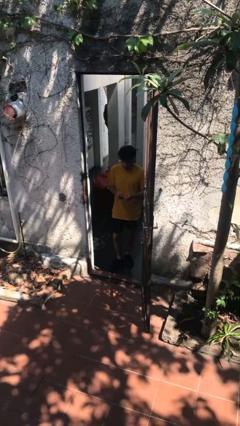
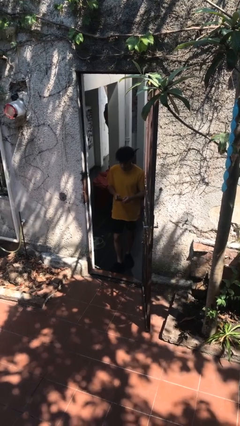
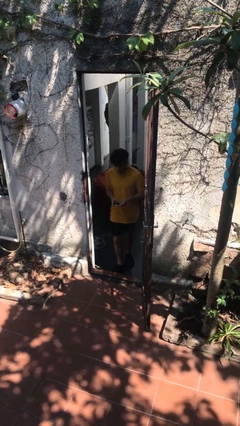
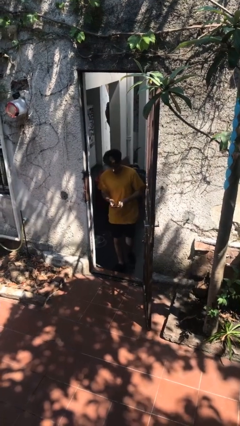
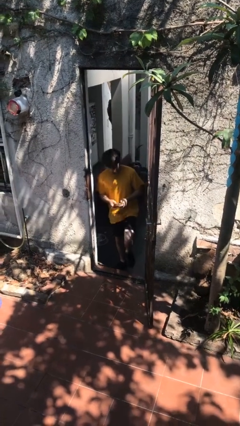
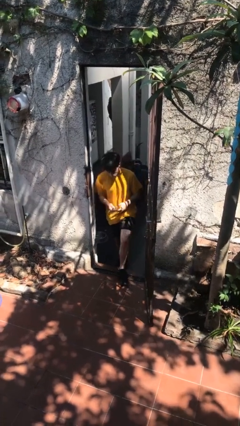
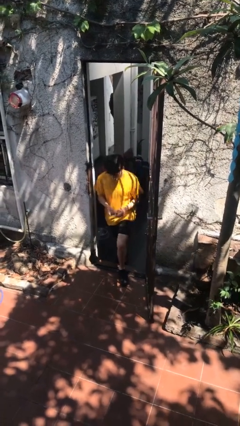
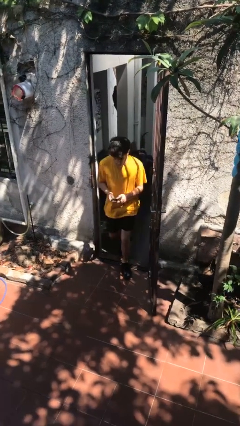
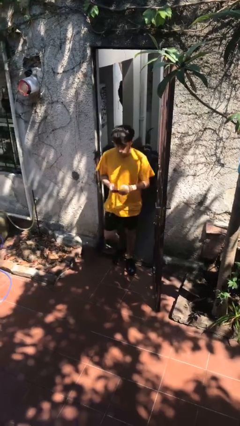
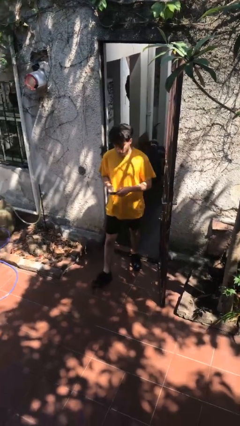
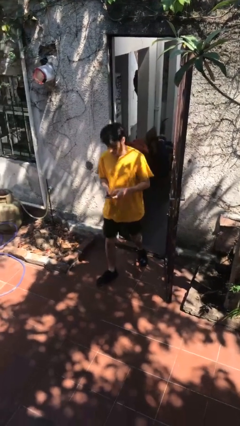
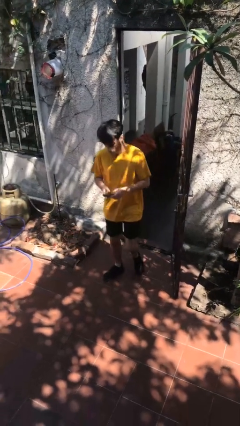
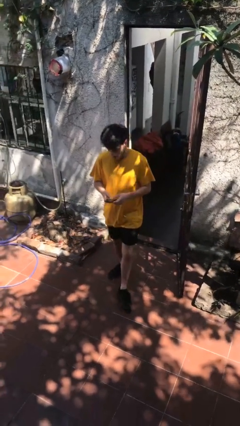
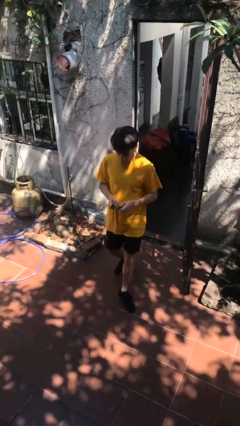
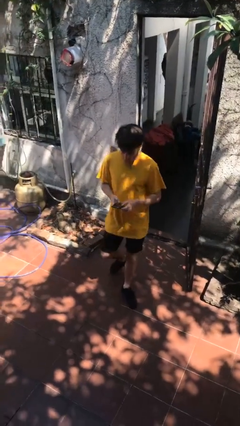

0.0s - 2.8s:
person enters scene through structure

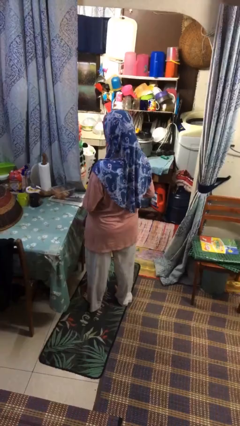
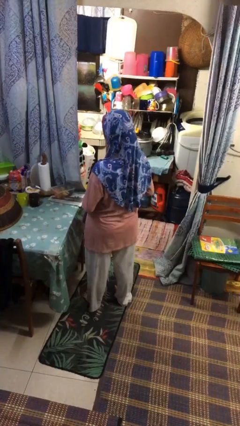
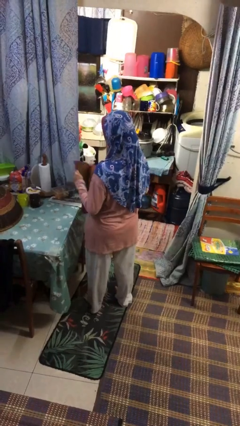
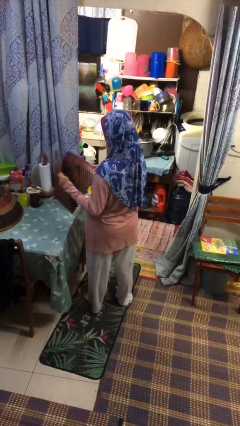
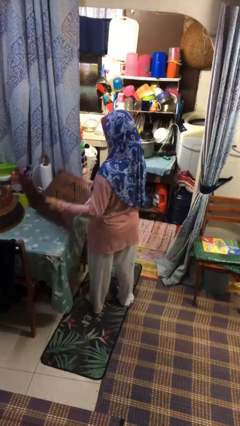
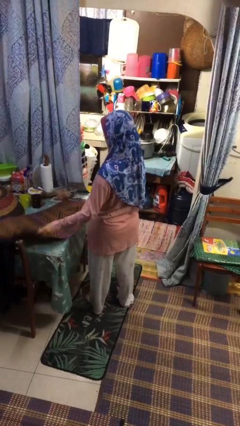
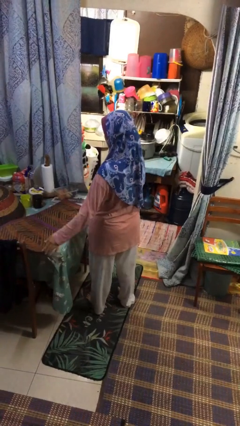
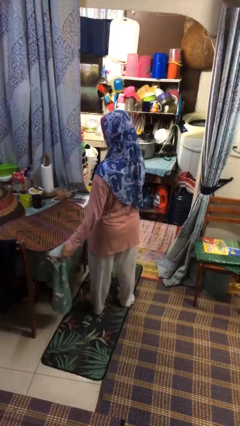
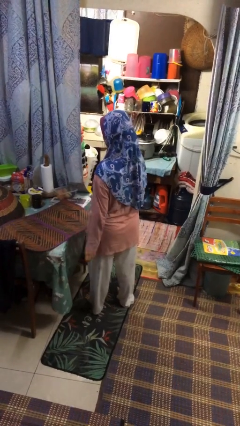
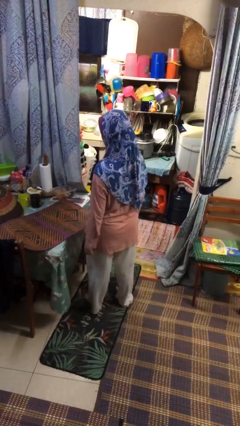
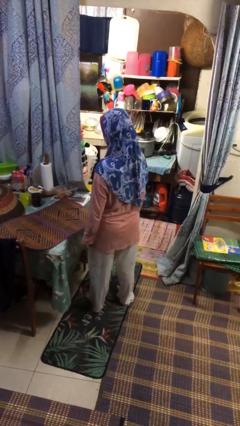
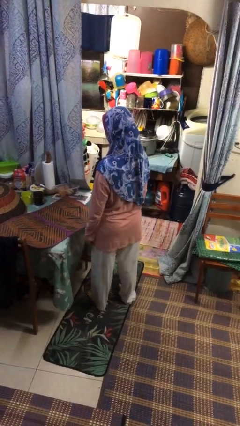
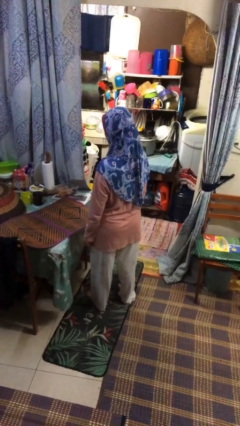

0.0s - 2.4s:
person spreads tablecloth

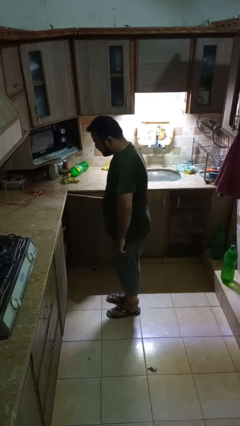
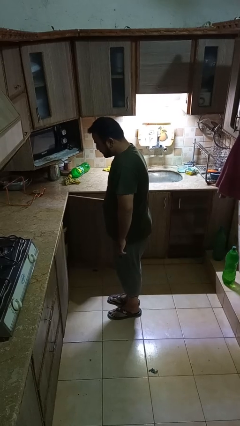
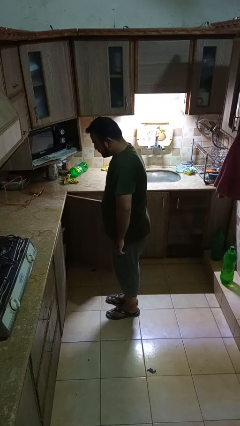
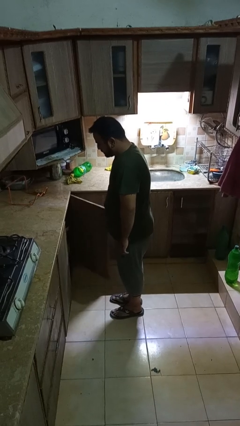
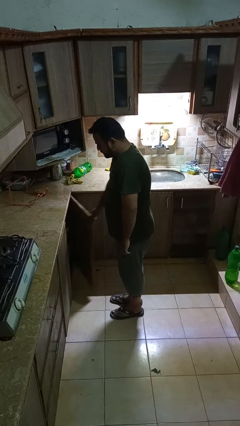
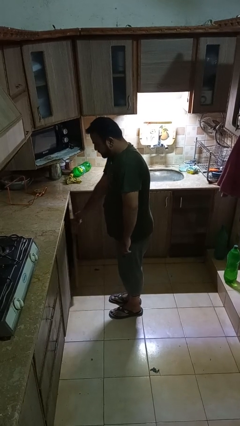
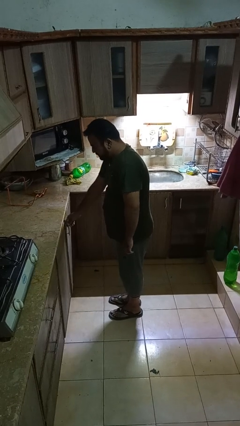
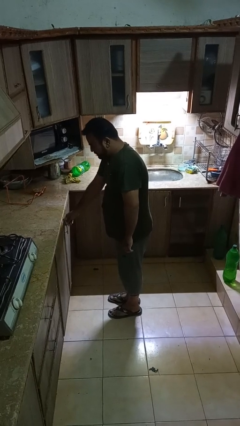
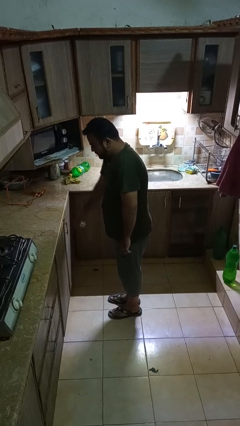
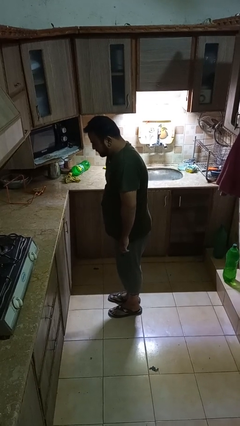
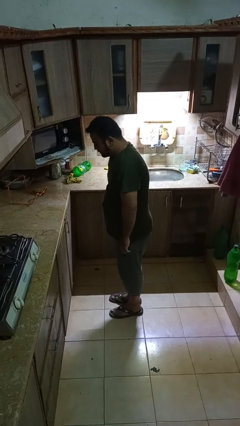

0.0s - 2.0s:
person closes cabinet

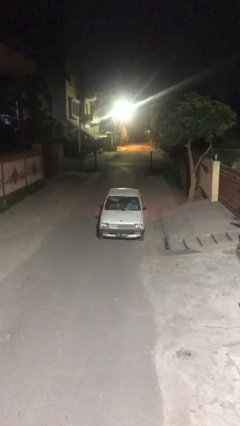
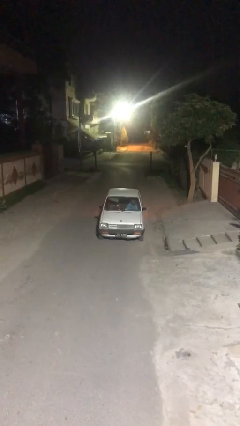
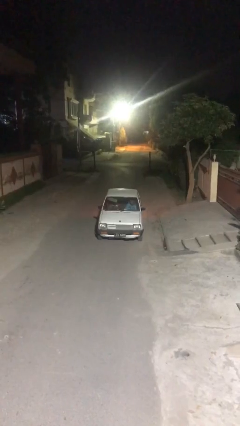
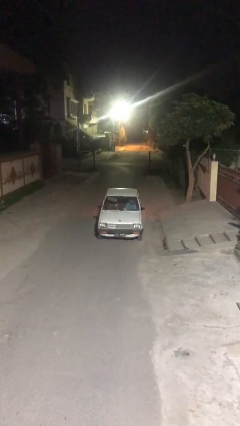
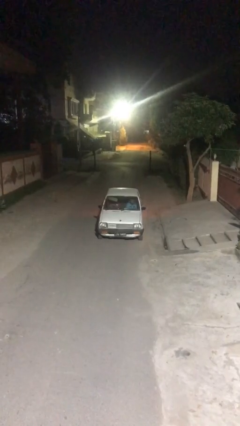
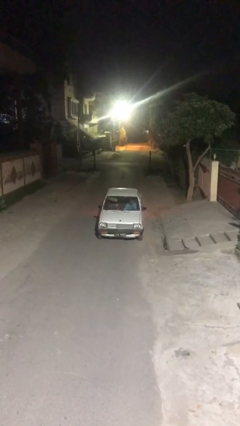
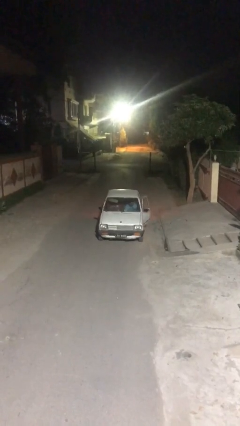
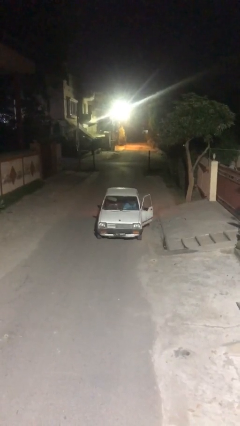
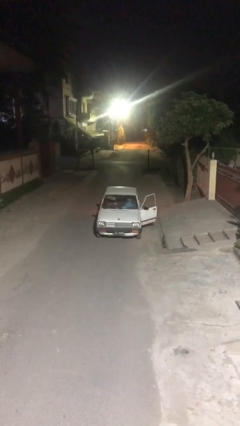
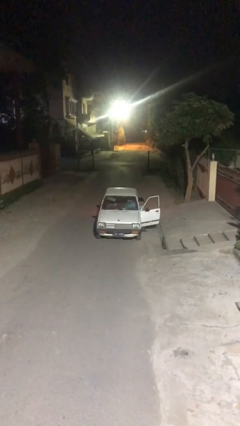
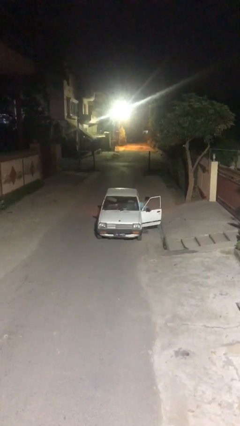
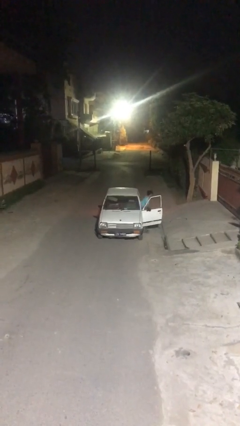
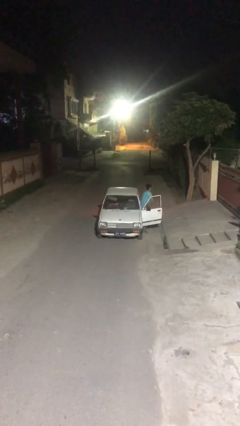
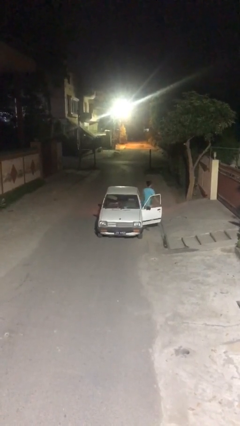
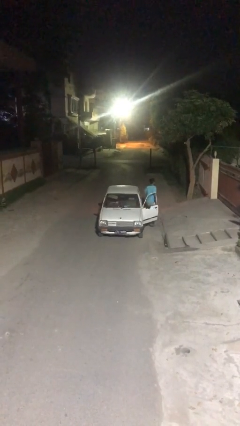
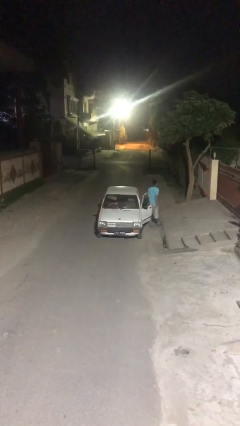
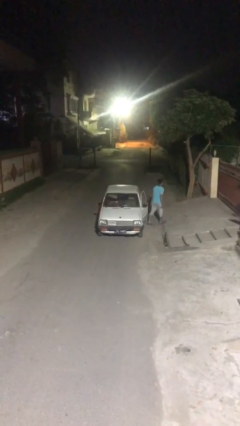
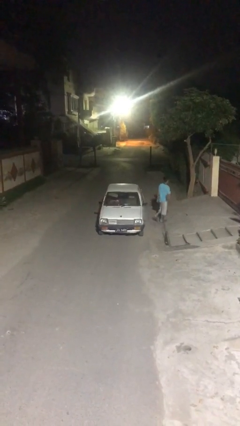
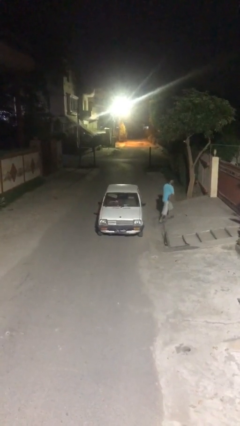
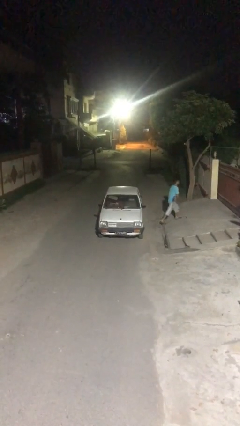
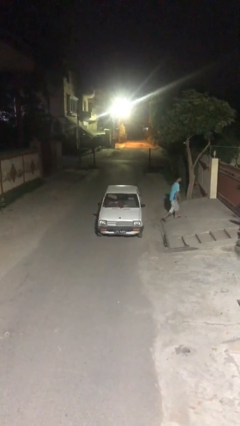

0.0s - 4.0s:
car drops off person

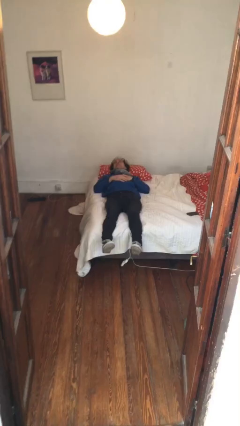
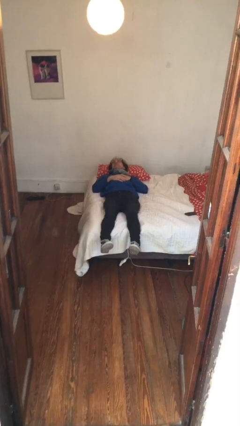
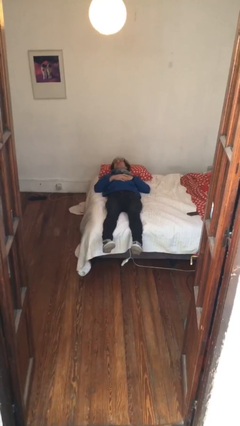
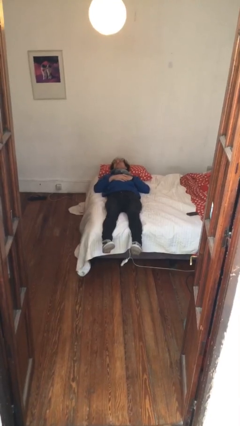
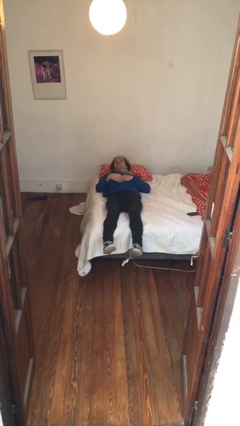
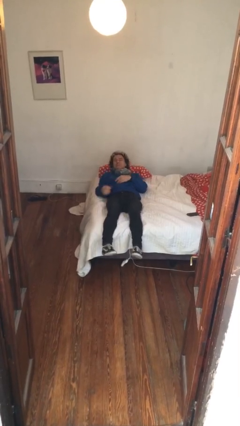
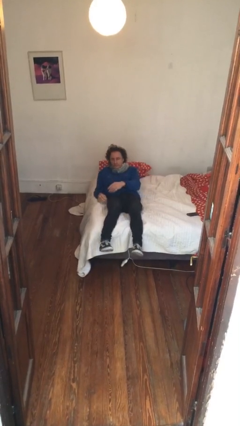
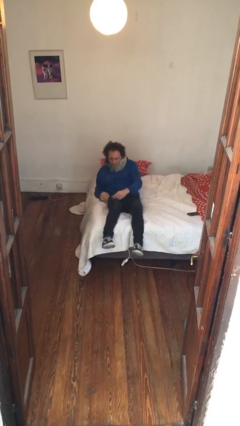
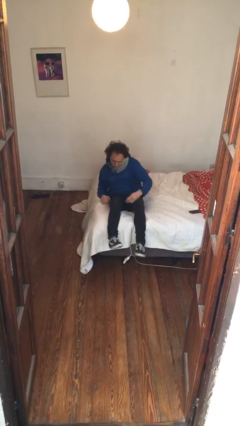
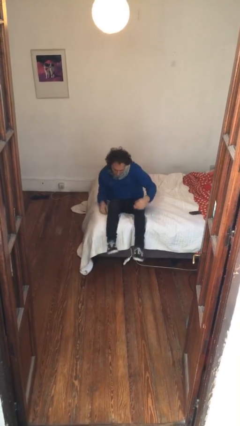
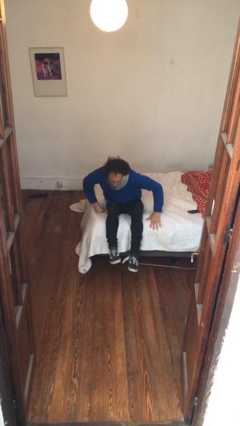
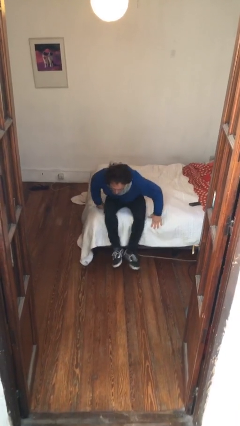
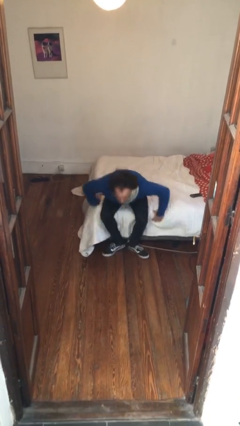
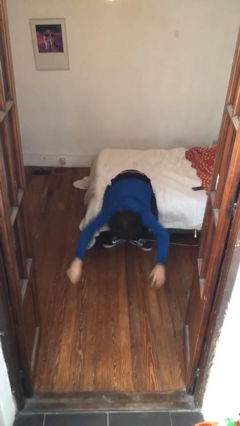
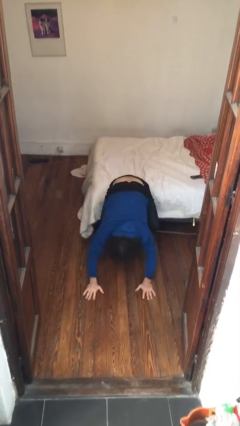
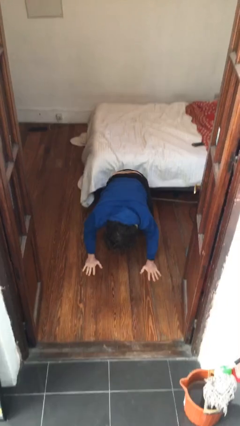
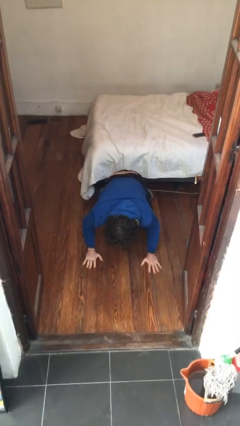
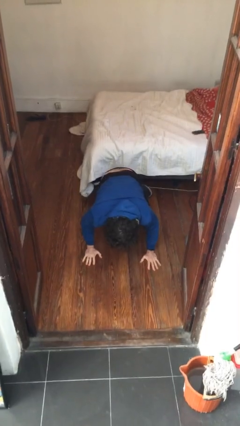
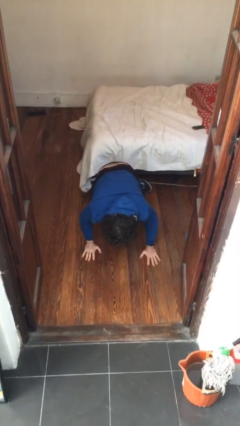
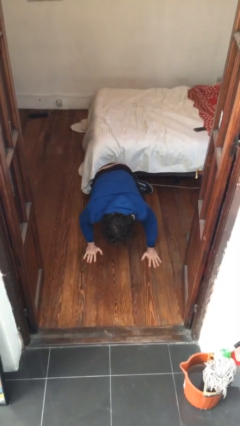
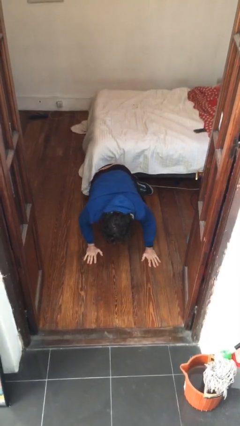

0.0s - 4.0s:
person falls from bed

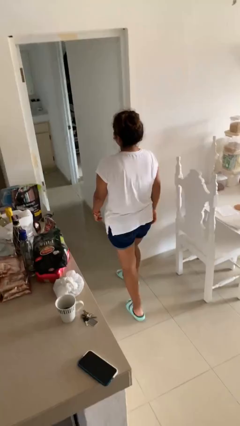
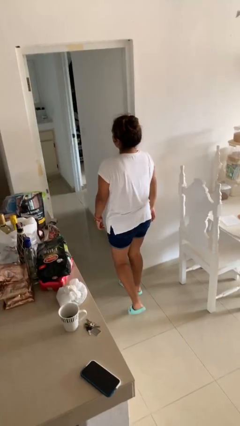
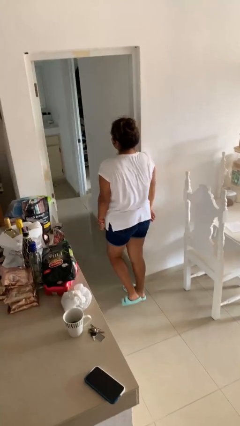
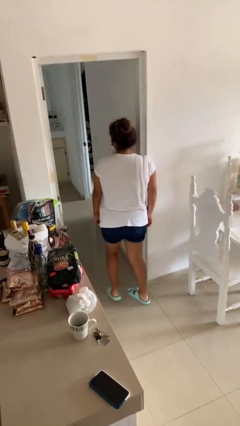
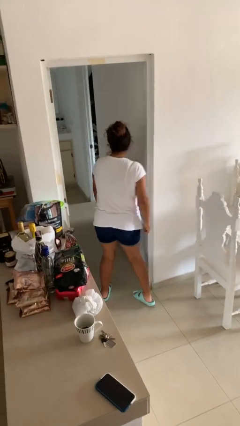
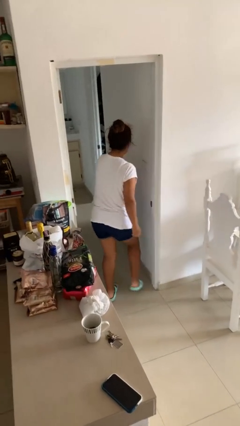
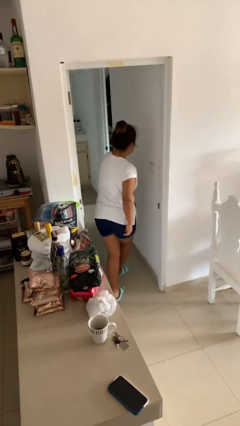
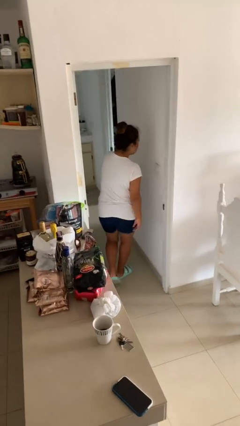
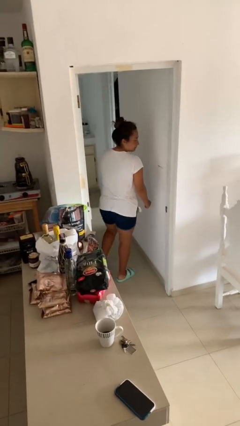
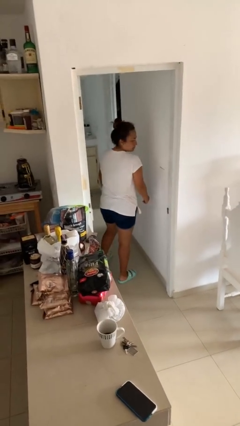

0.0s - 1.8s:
person bumps into wall
